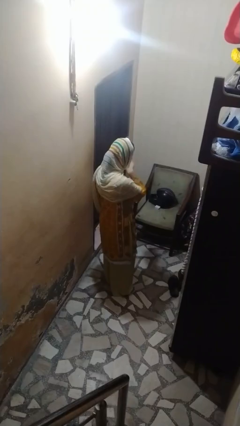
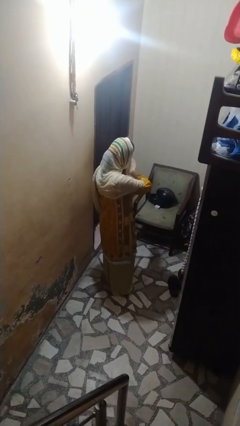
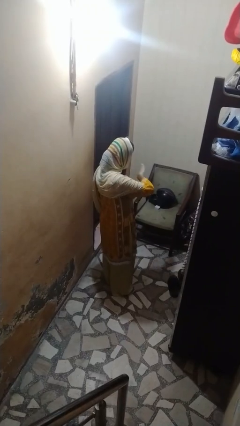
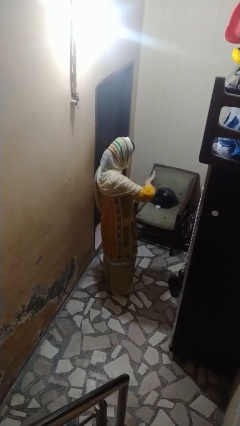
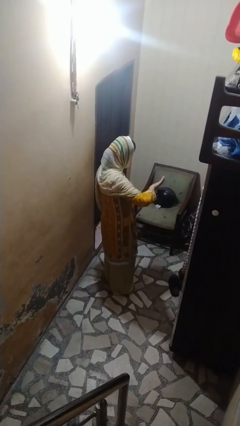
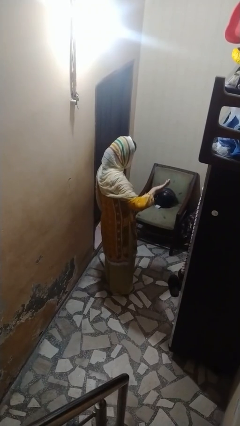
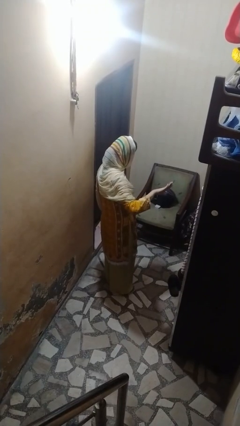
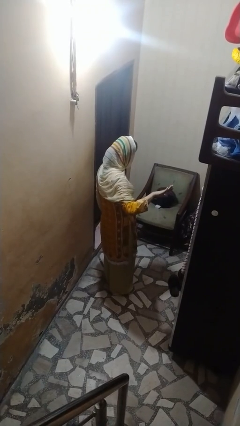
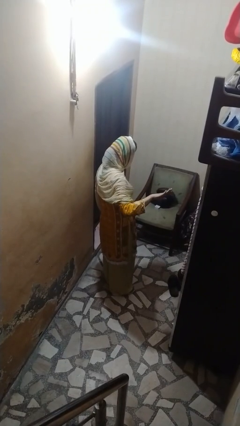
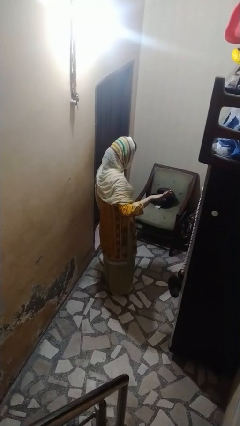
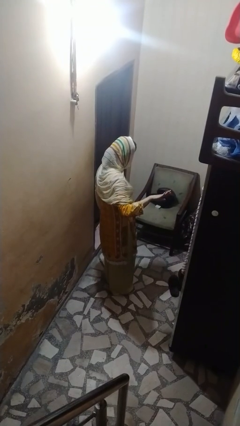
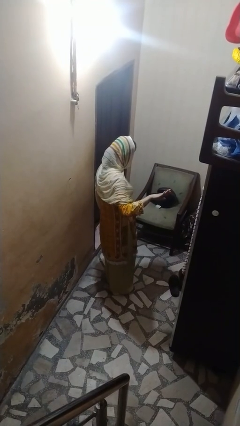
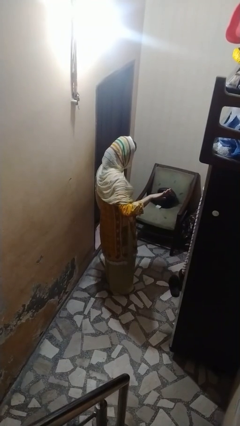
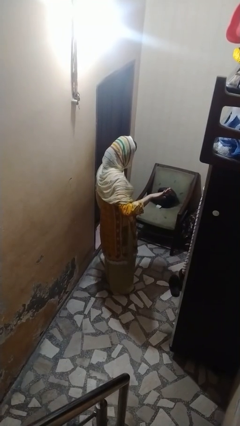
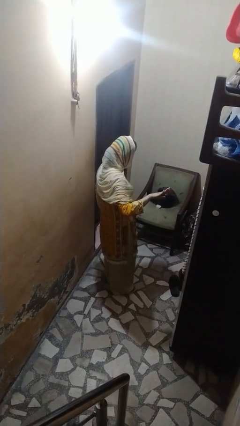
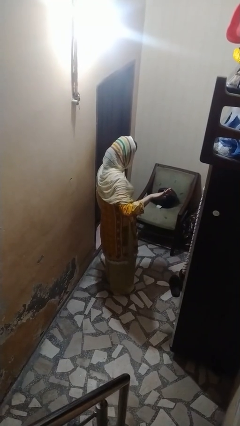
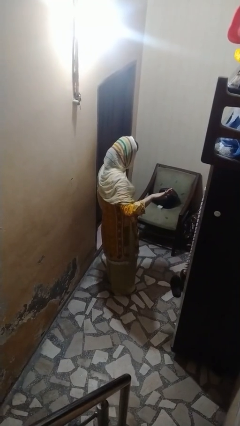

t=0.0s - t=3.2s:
person gestures swipe right

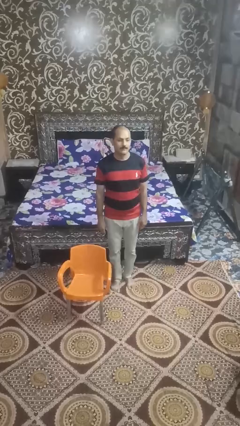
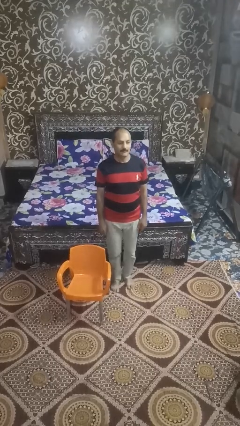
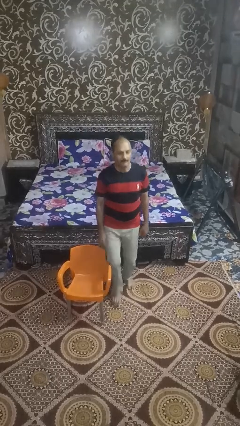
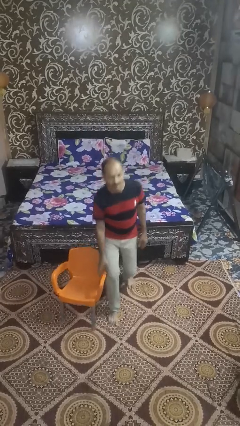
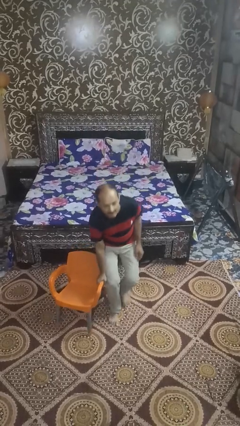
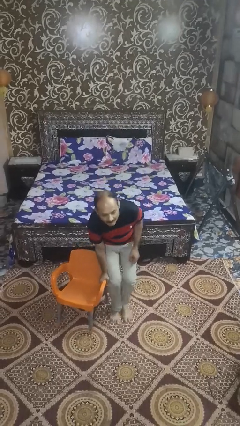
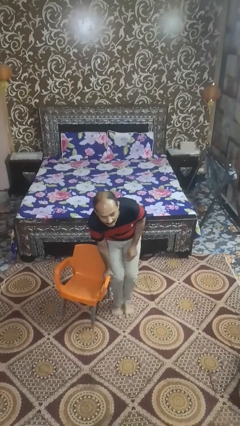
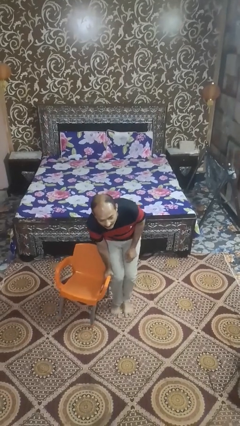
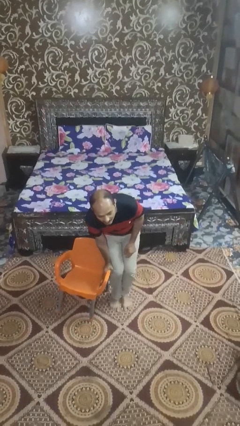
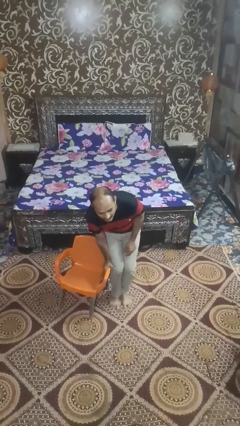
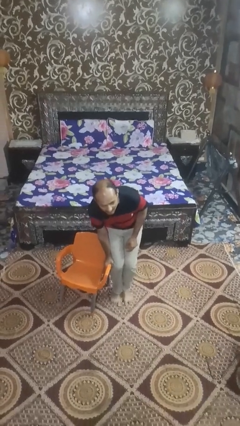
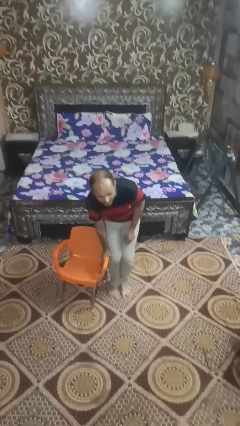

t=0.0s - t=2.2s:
person trips on object on floor

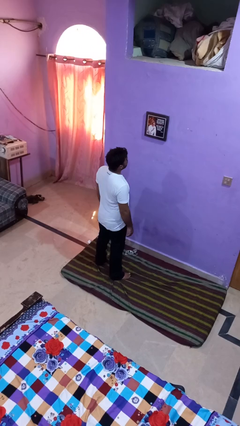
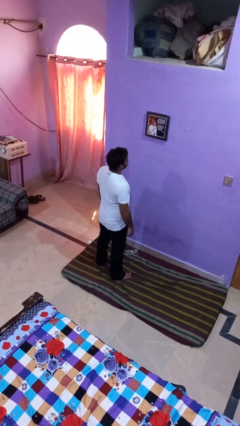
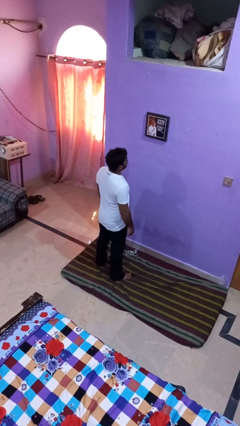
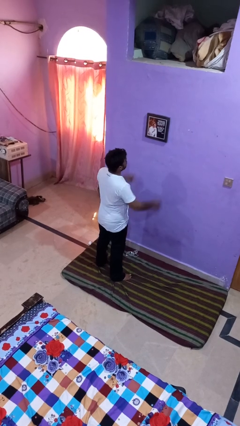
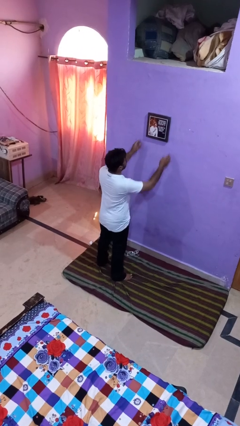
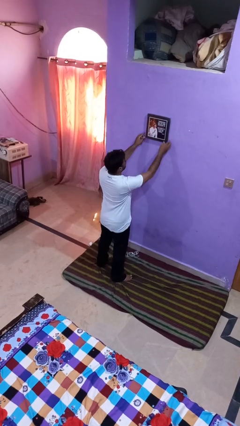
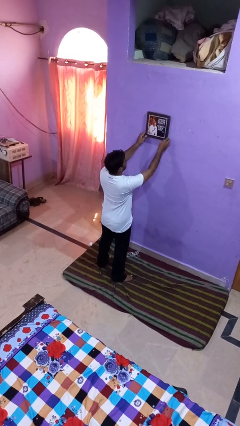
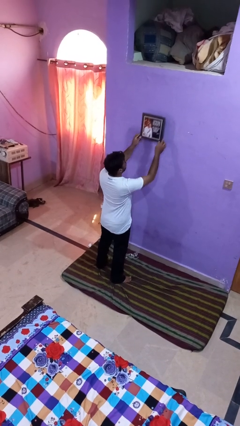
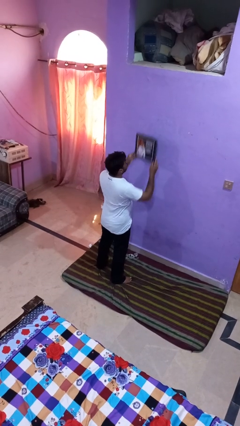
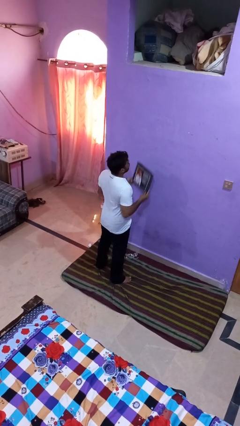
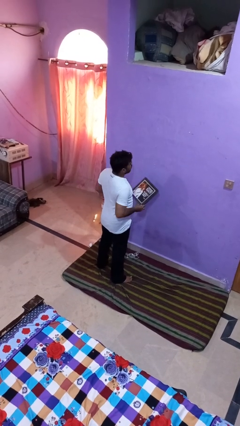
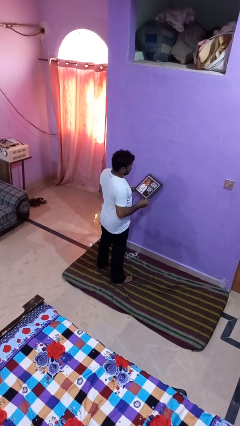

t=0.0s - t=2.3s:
person puts up picture frame

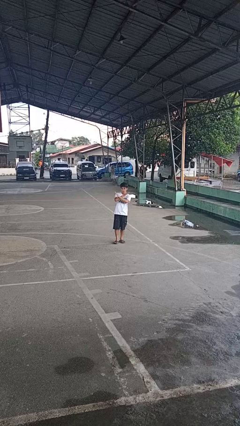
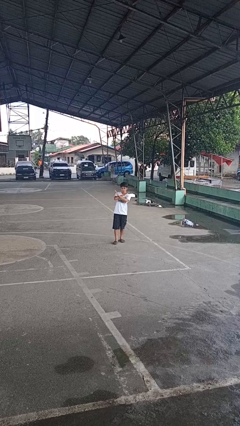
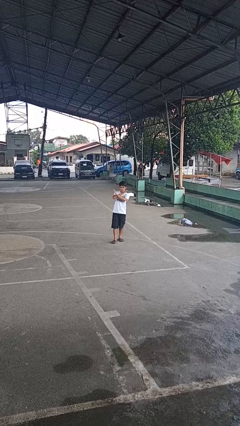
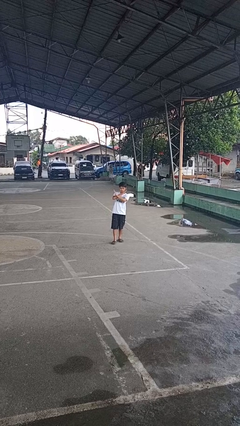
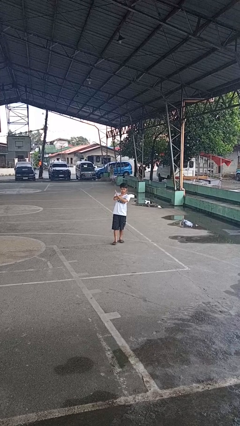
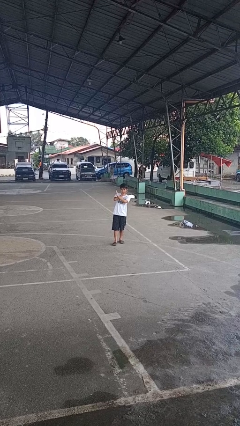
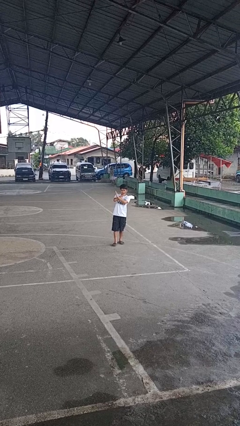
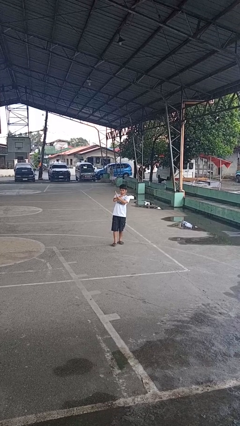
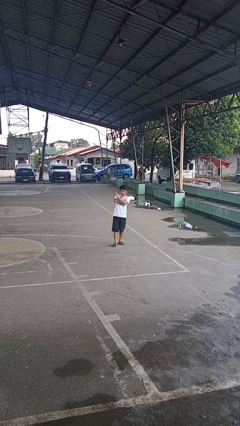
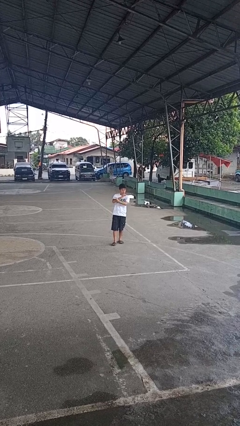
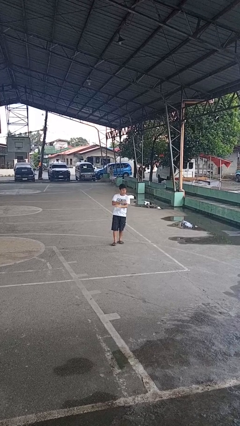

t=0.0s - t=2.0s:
person gestures arms x

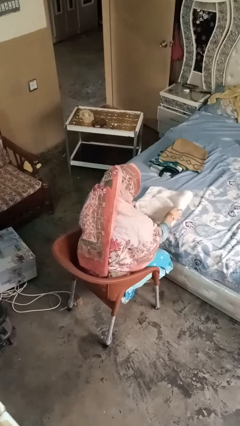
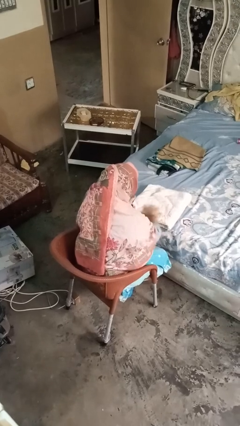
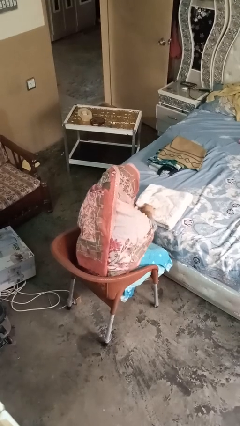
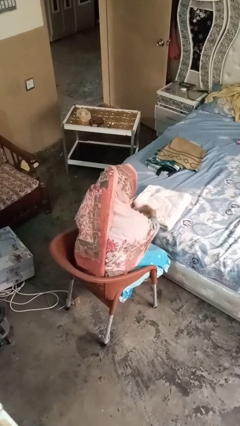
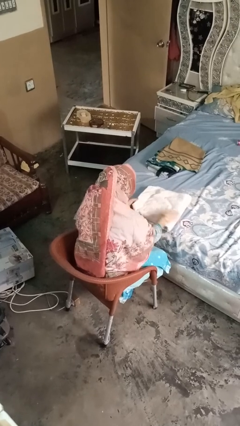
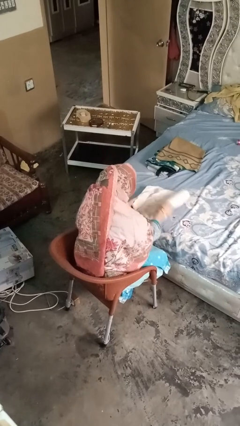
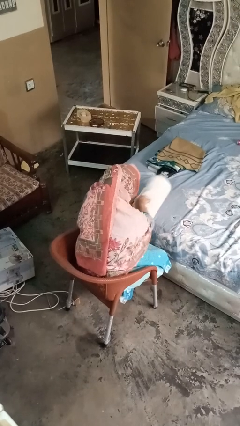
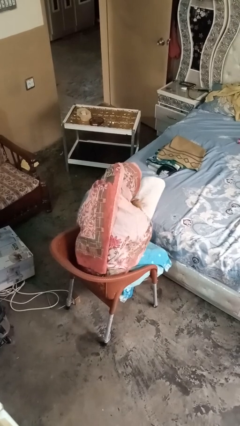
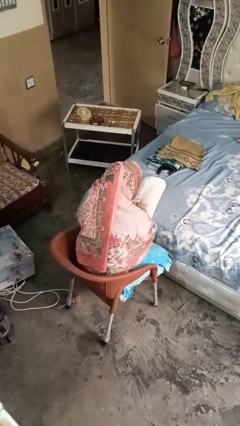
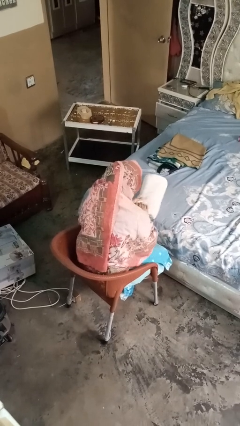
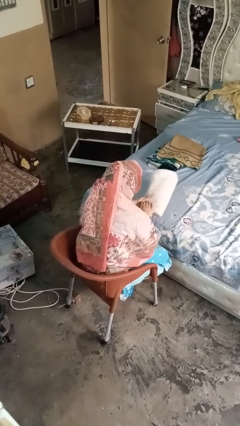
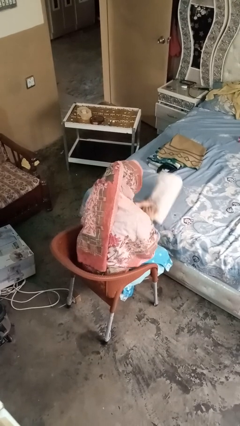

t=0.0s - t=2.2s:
person folds towel

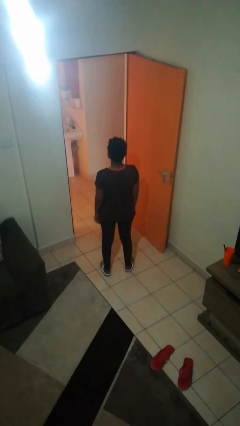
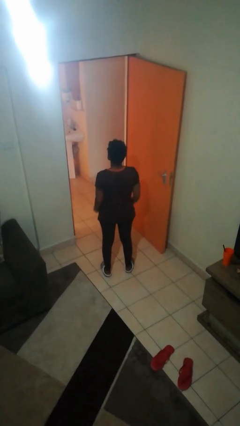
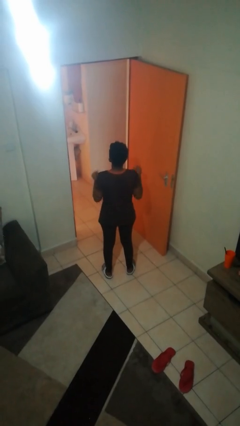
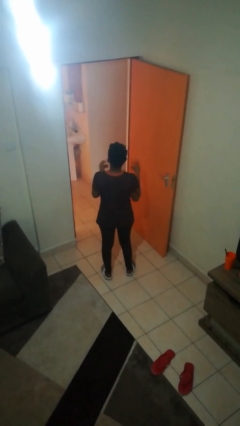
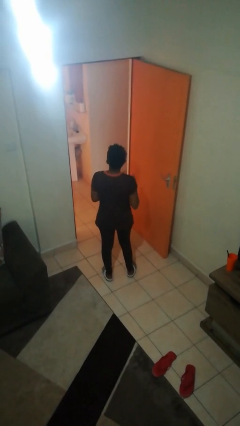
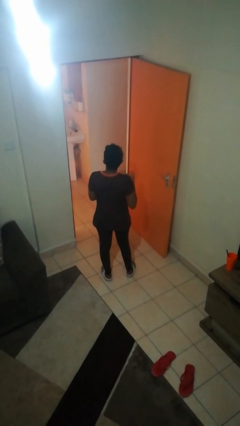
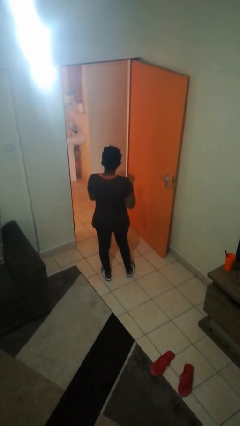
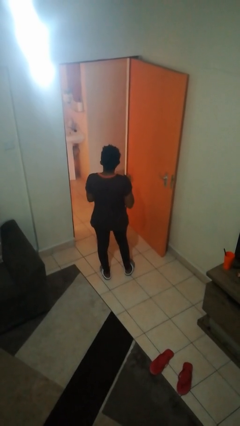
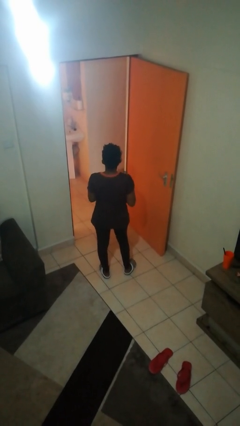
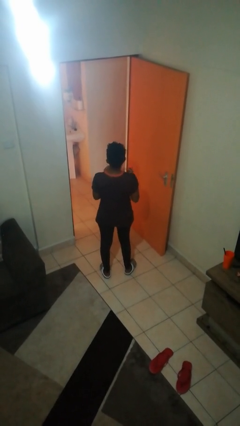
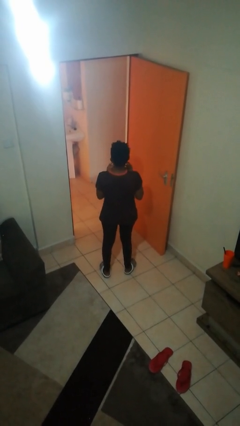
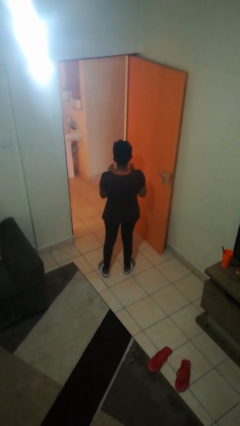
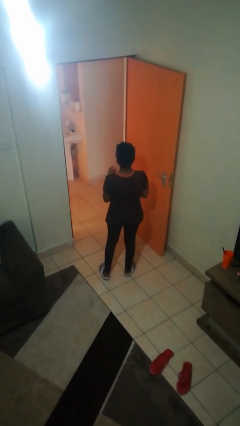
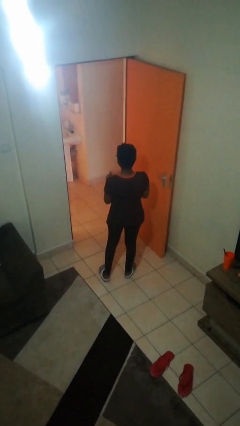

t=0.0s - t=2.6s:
person snaps fingers

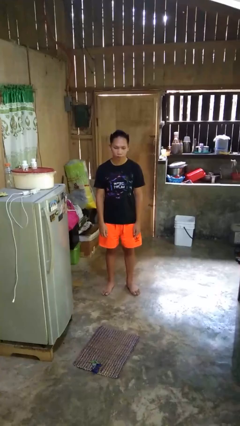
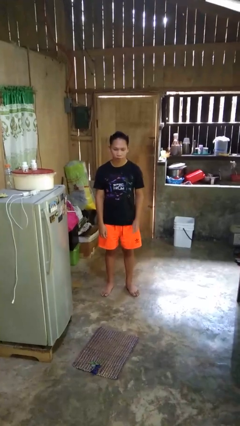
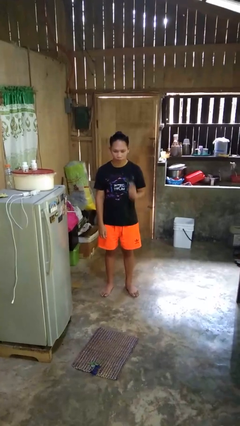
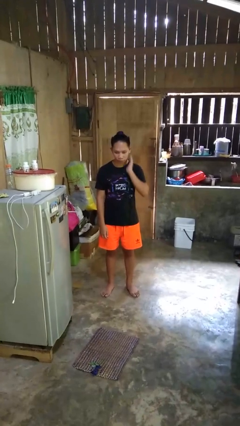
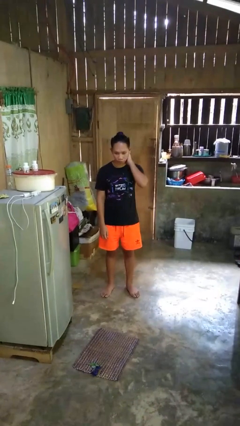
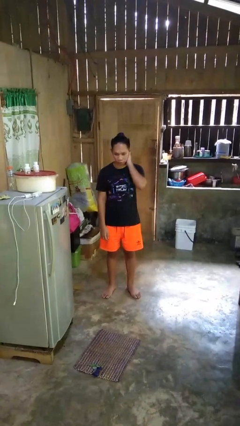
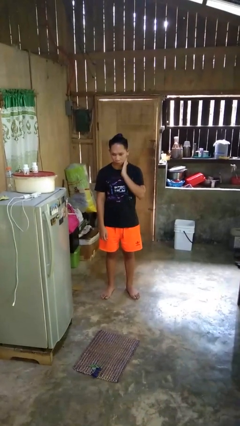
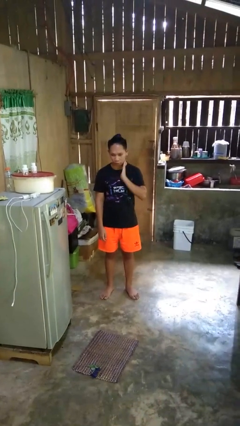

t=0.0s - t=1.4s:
person rubs neck

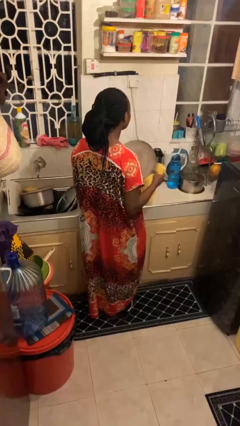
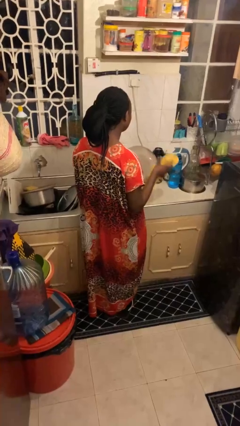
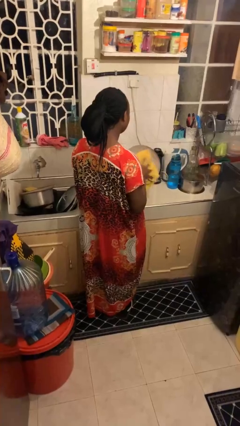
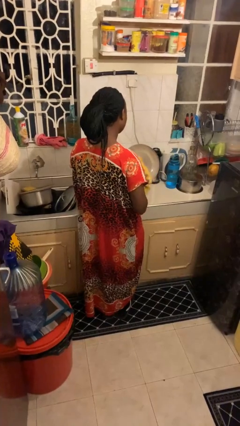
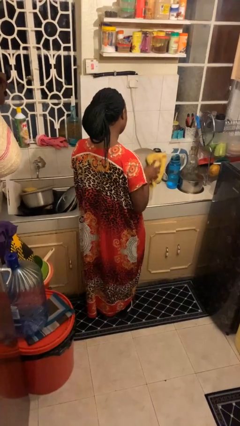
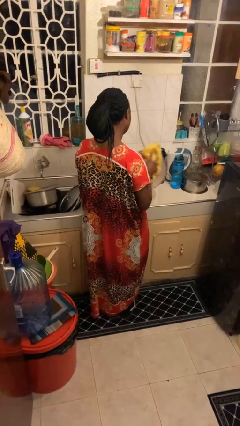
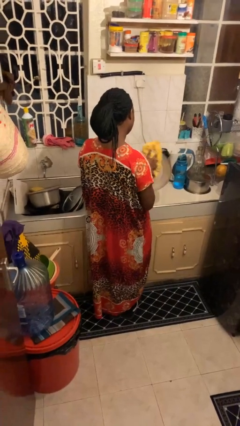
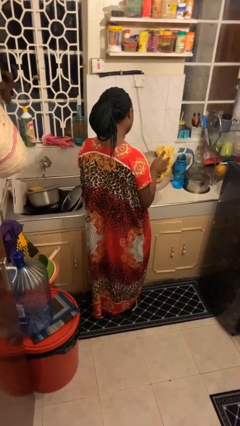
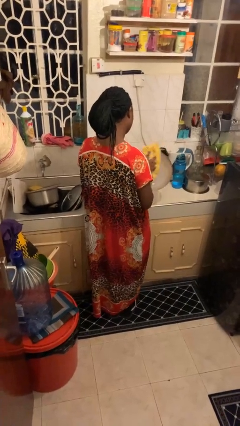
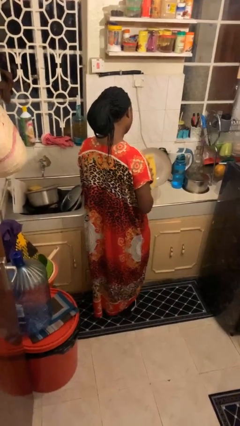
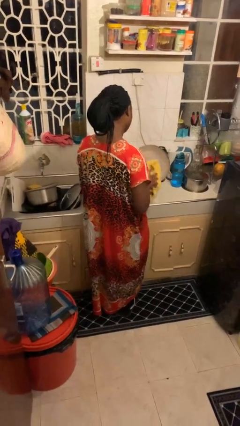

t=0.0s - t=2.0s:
person dries dish
